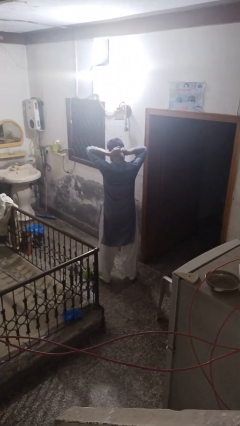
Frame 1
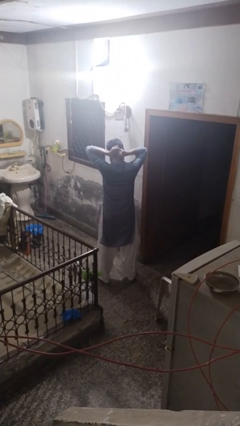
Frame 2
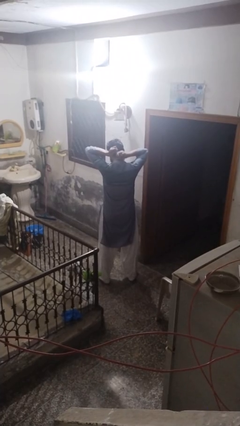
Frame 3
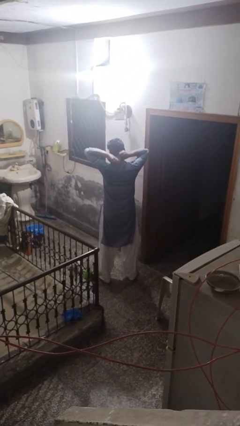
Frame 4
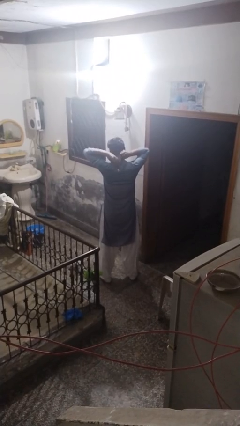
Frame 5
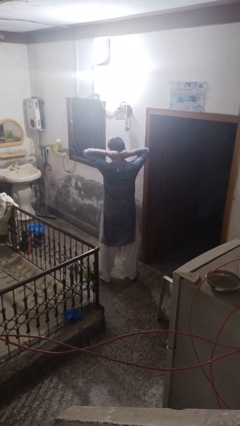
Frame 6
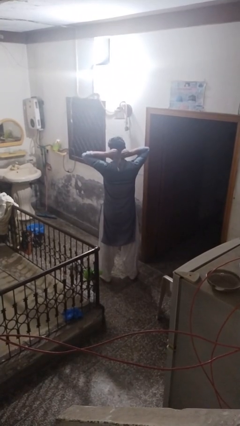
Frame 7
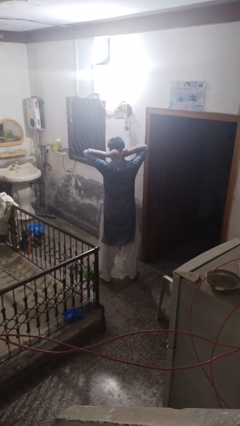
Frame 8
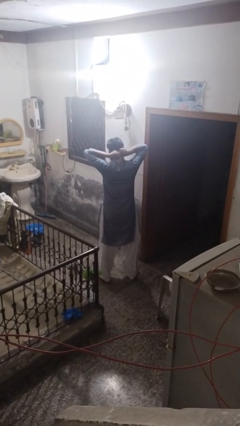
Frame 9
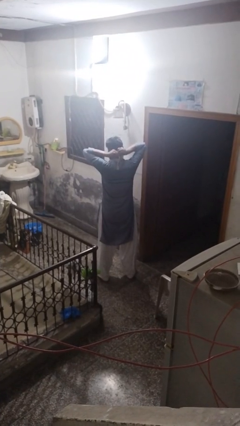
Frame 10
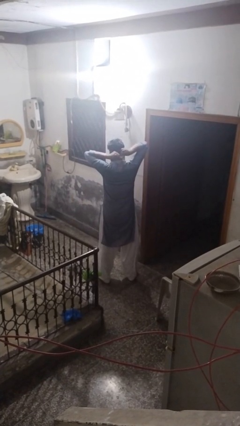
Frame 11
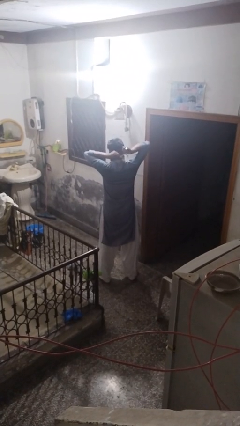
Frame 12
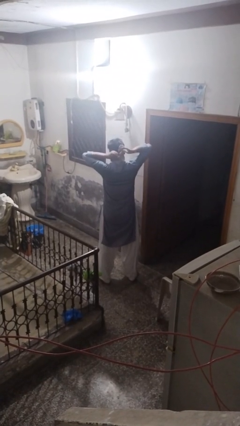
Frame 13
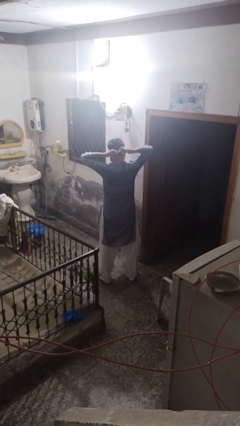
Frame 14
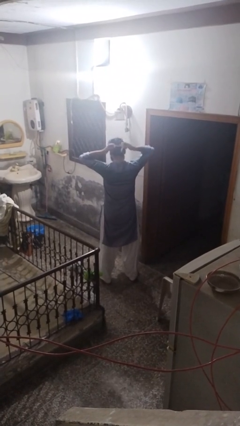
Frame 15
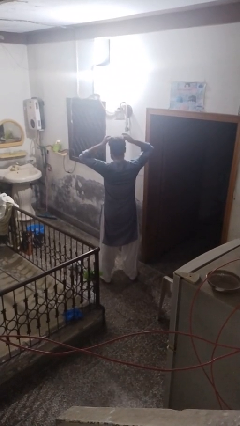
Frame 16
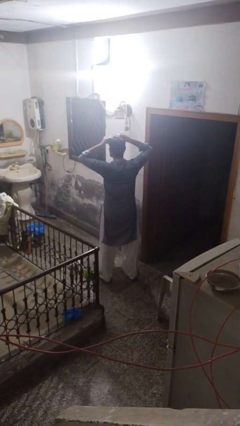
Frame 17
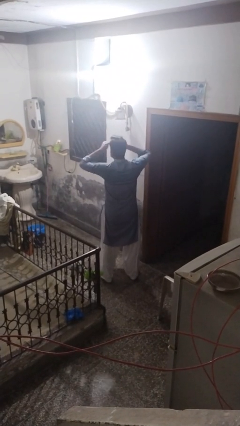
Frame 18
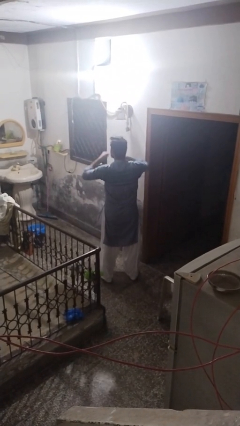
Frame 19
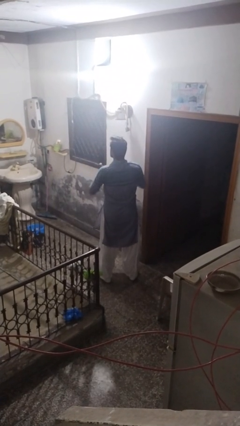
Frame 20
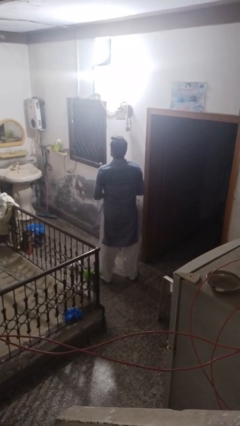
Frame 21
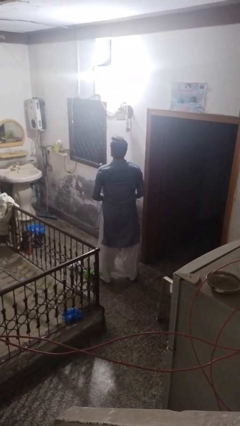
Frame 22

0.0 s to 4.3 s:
person takes off necklace

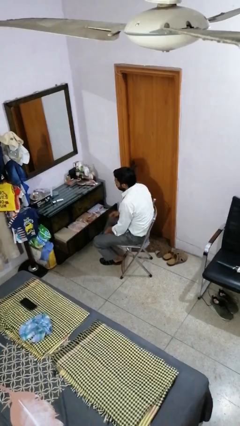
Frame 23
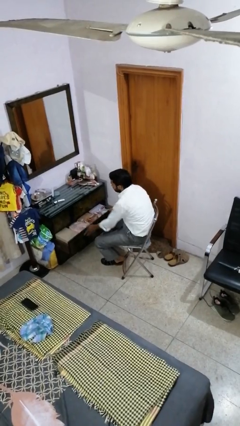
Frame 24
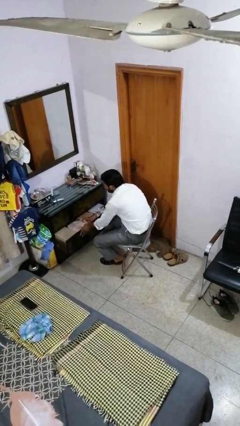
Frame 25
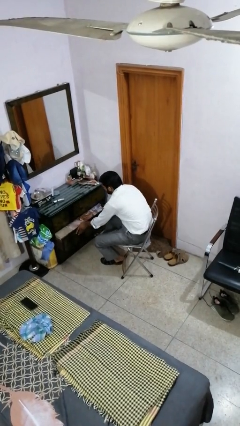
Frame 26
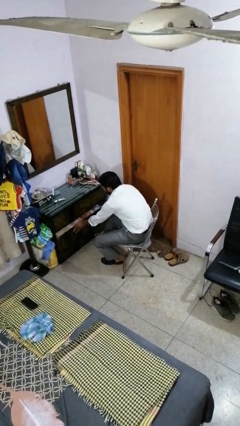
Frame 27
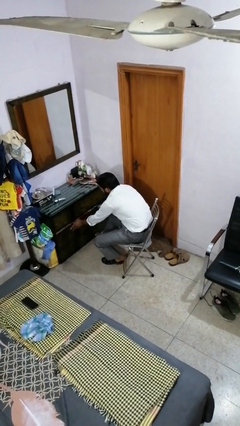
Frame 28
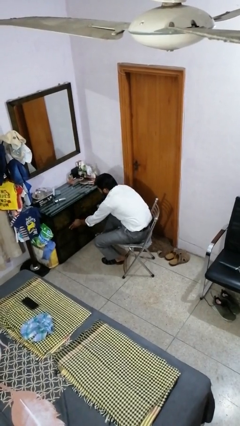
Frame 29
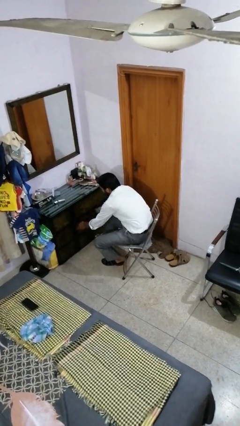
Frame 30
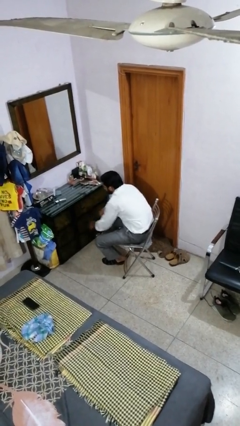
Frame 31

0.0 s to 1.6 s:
person closes dresser drawer

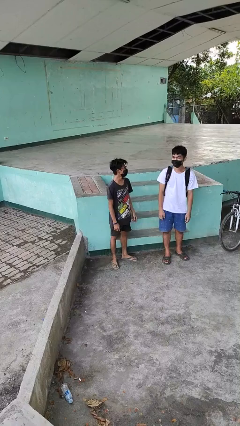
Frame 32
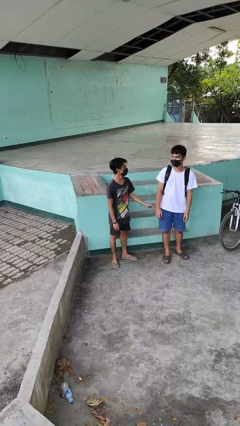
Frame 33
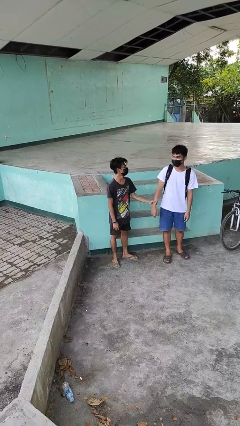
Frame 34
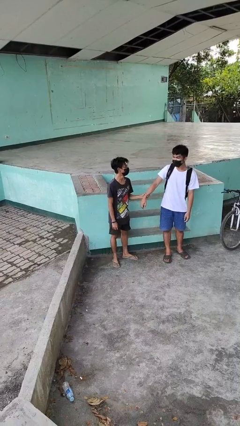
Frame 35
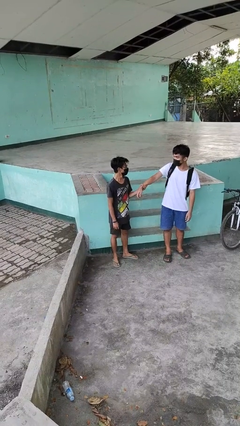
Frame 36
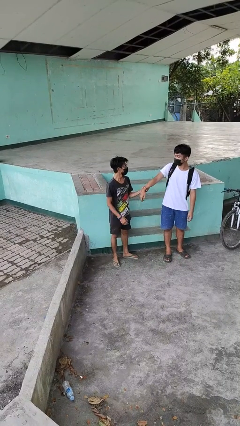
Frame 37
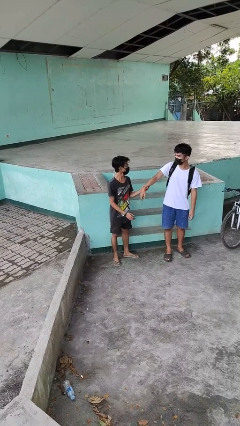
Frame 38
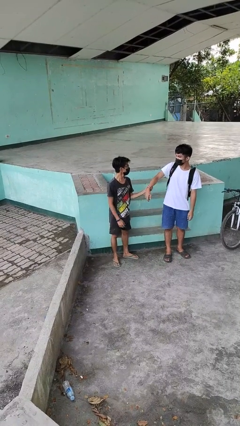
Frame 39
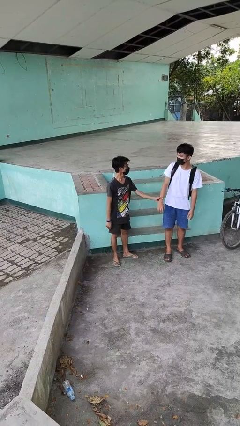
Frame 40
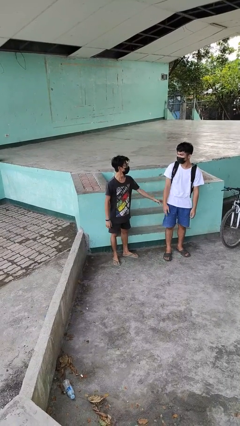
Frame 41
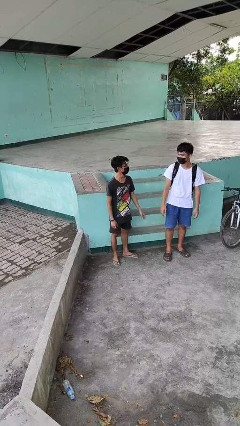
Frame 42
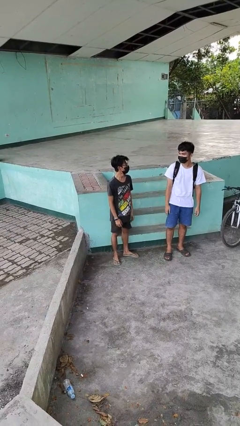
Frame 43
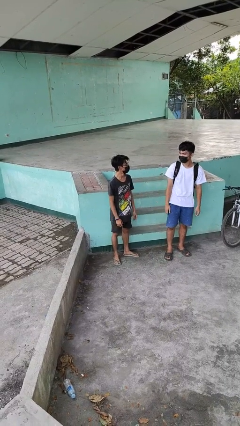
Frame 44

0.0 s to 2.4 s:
person grabs person by forearm

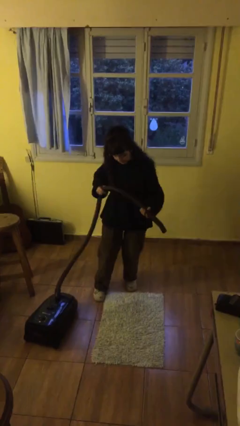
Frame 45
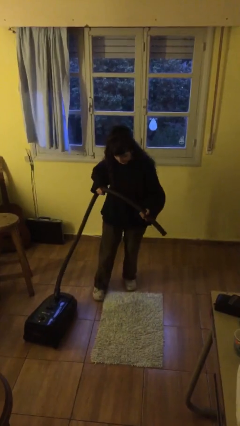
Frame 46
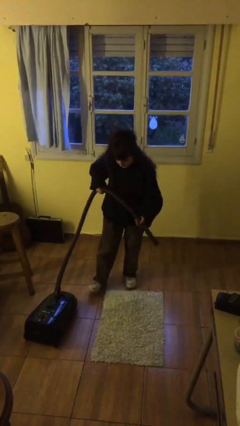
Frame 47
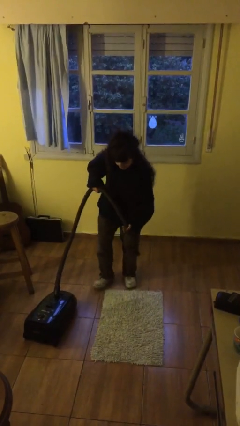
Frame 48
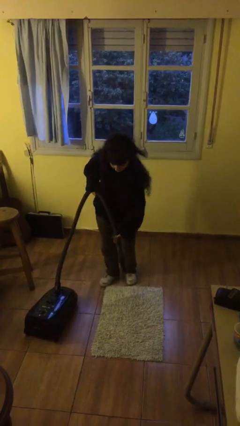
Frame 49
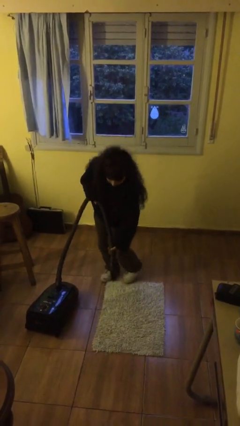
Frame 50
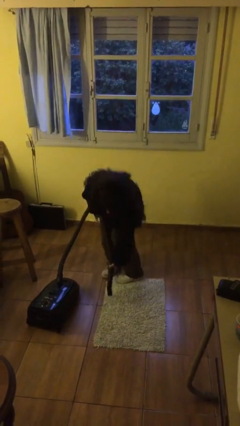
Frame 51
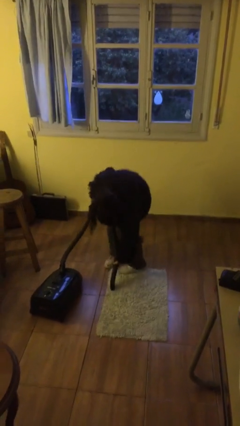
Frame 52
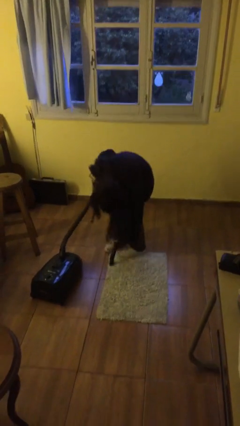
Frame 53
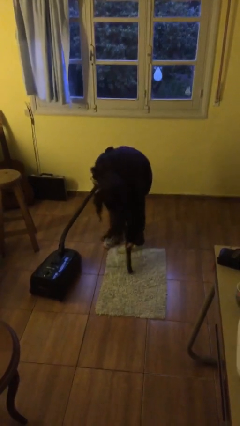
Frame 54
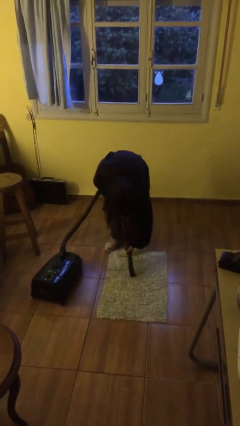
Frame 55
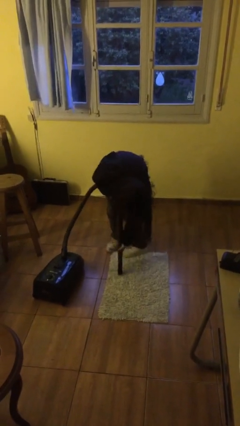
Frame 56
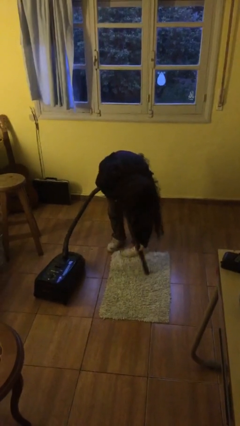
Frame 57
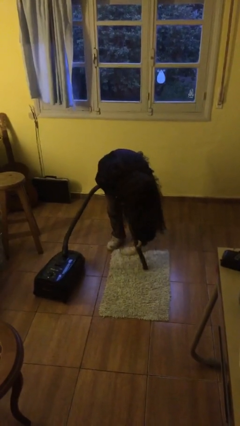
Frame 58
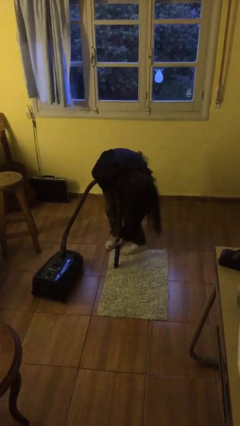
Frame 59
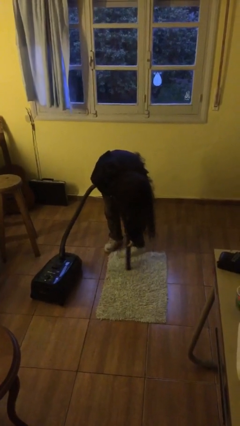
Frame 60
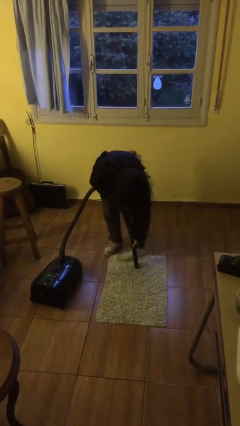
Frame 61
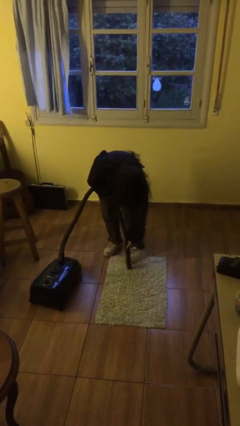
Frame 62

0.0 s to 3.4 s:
person vacuums carpet

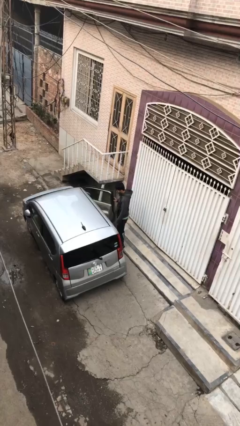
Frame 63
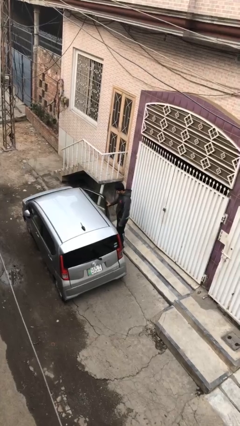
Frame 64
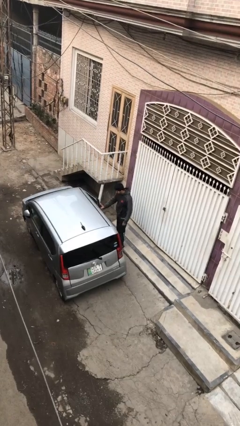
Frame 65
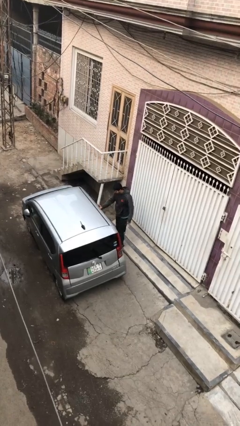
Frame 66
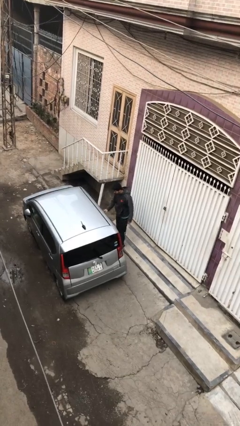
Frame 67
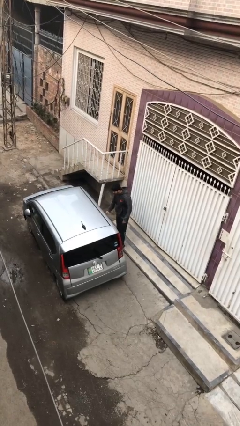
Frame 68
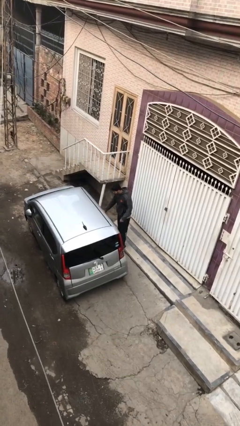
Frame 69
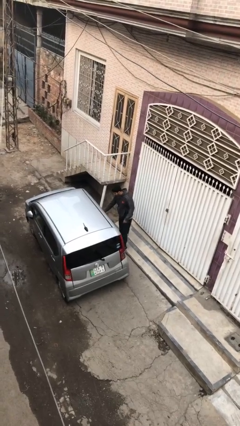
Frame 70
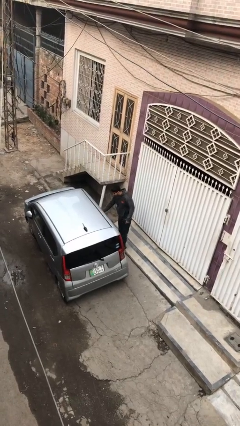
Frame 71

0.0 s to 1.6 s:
person closes car door

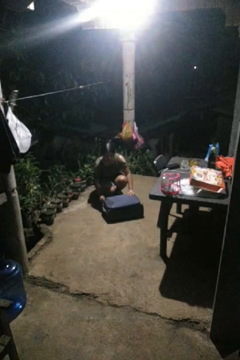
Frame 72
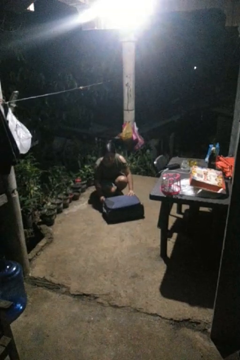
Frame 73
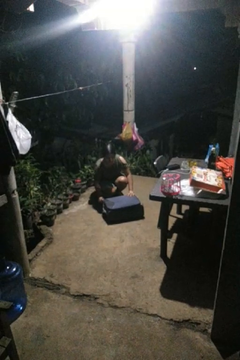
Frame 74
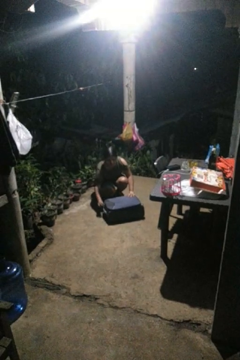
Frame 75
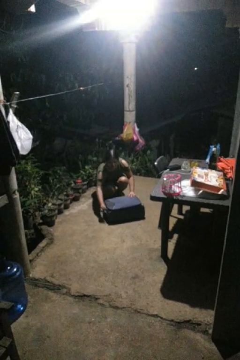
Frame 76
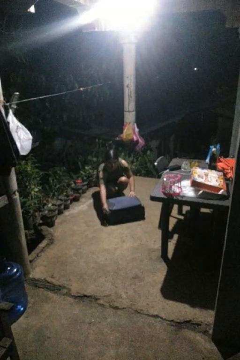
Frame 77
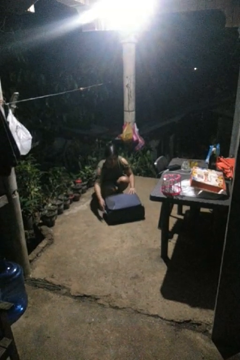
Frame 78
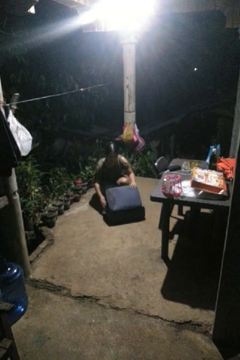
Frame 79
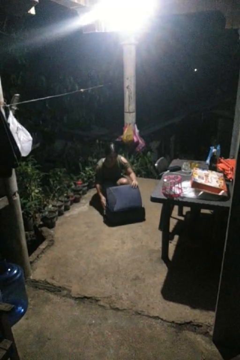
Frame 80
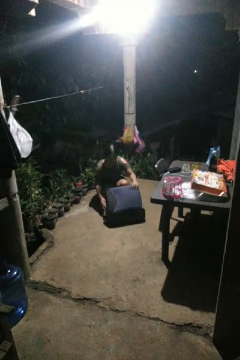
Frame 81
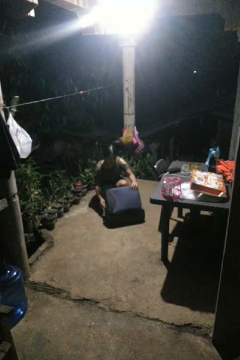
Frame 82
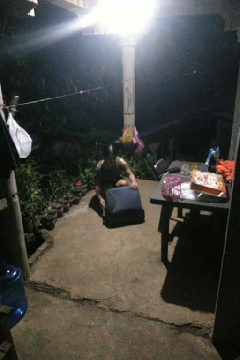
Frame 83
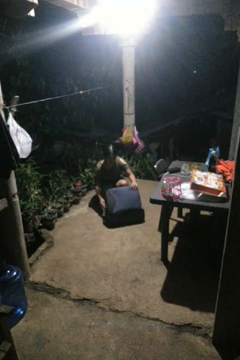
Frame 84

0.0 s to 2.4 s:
person opens suitcase

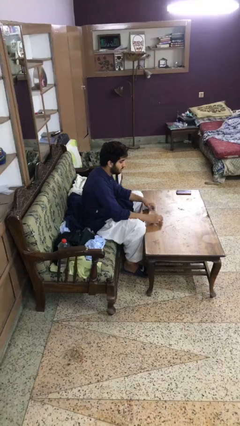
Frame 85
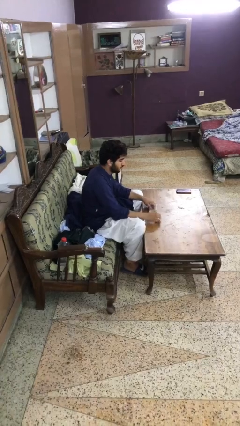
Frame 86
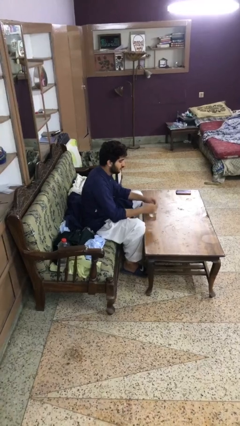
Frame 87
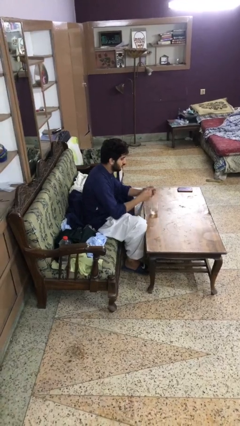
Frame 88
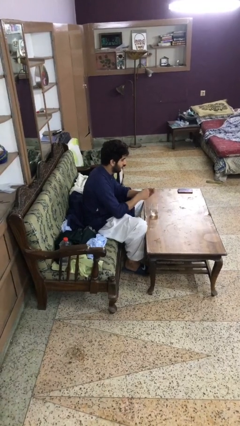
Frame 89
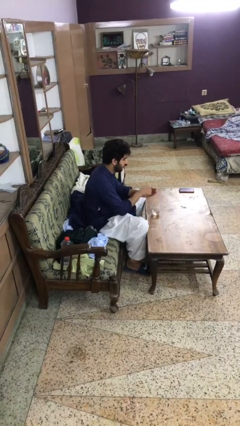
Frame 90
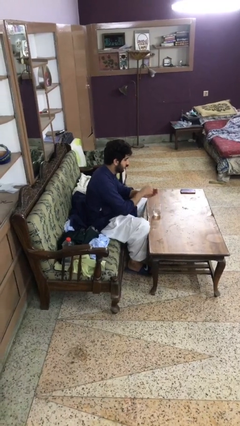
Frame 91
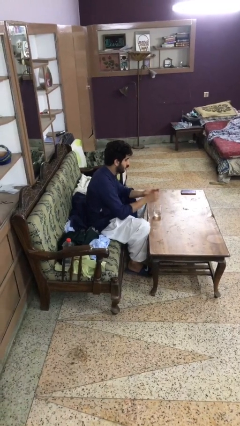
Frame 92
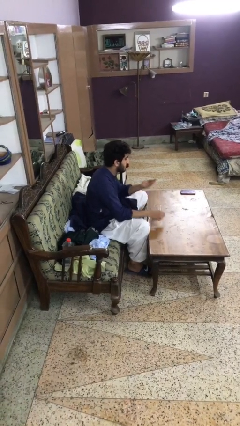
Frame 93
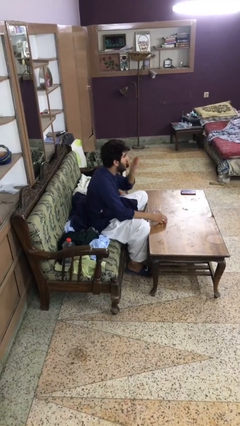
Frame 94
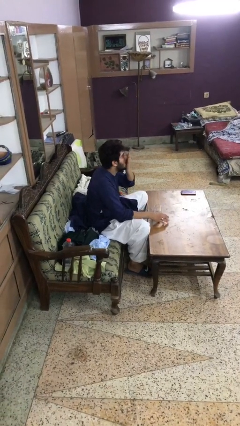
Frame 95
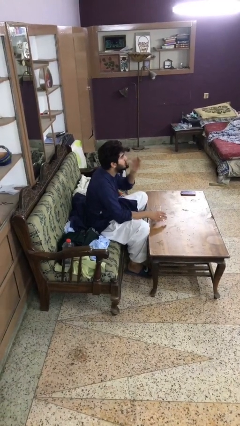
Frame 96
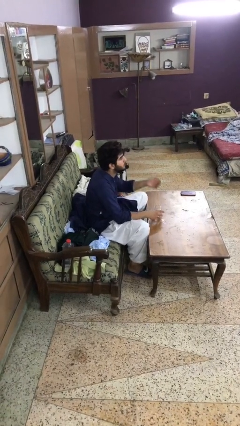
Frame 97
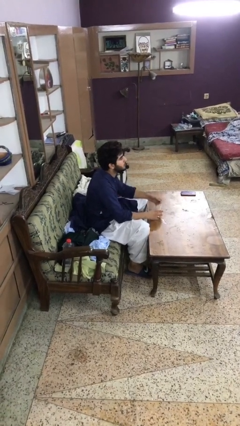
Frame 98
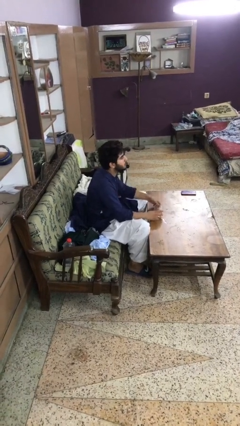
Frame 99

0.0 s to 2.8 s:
person takes medicine pills
